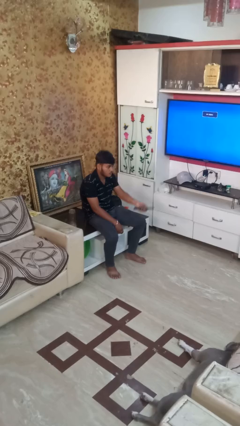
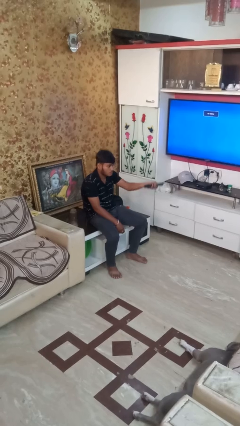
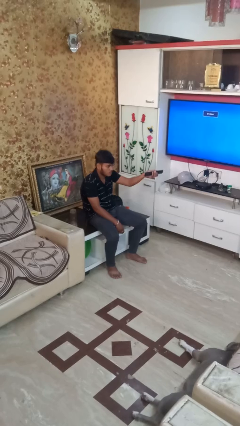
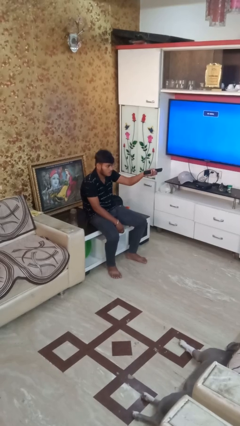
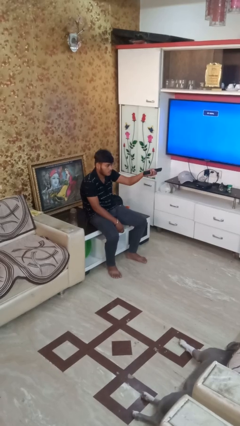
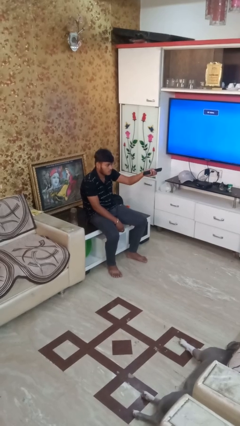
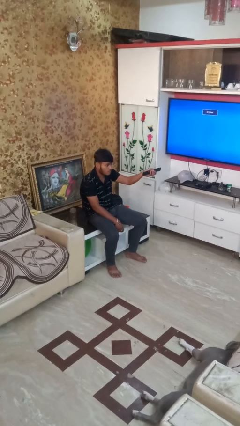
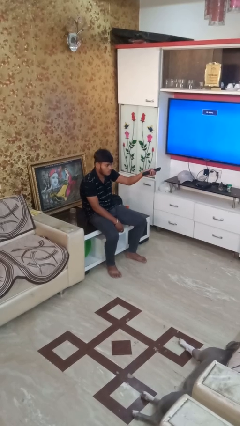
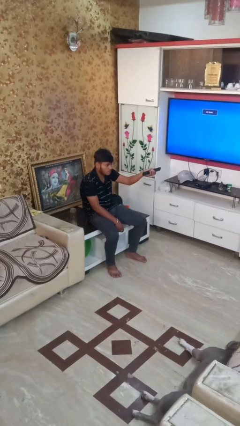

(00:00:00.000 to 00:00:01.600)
person uses television remote

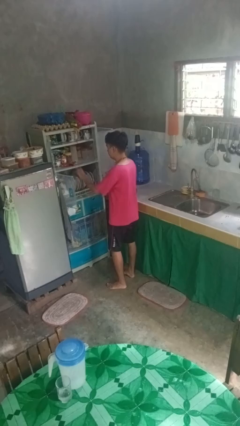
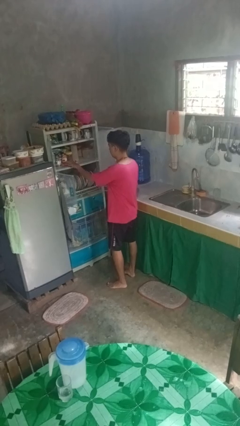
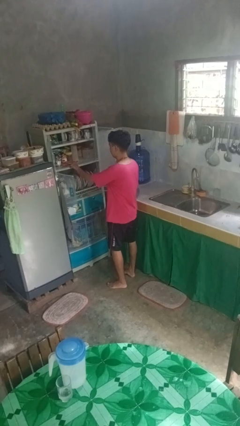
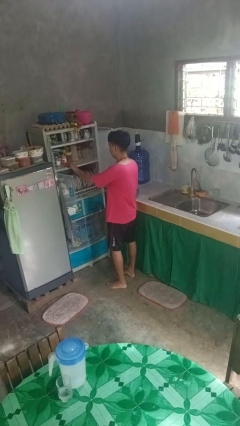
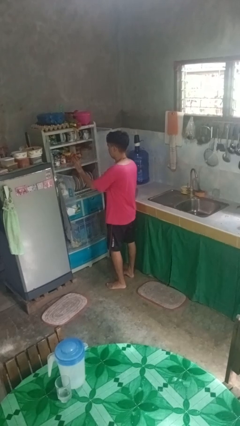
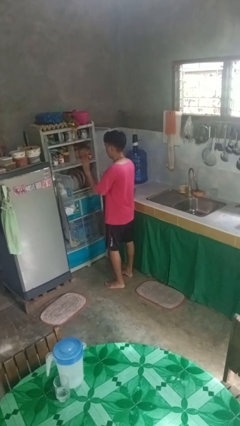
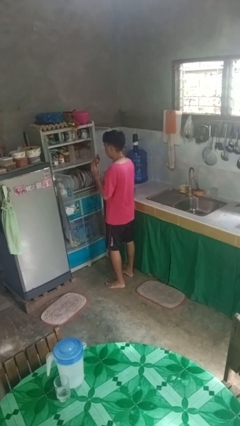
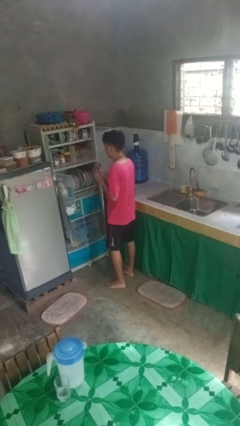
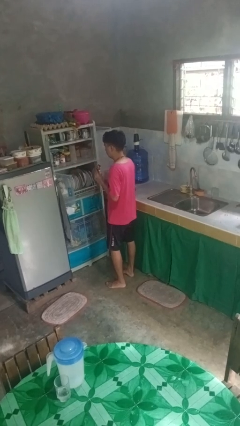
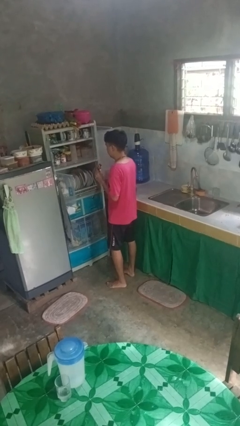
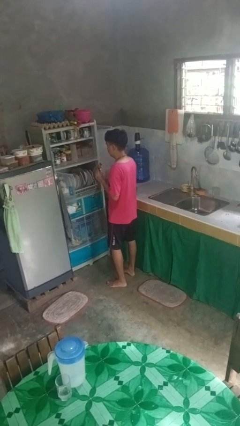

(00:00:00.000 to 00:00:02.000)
person takes object from cabinet

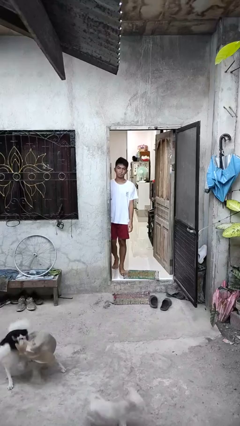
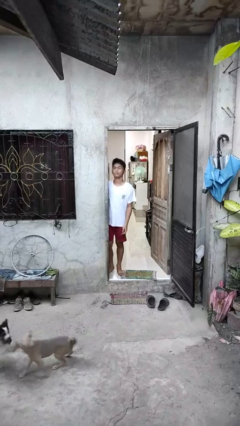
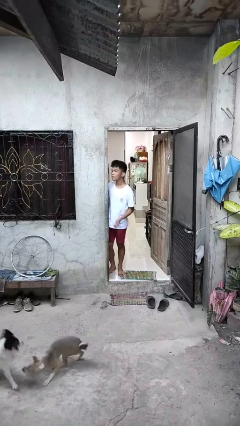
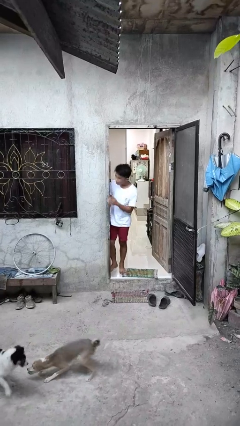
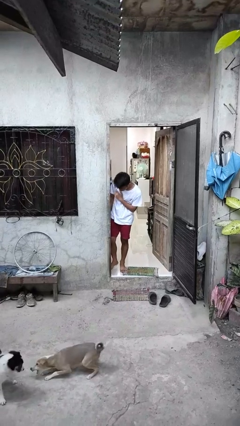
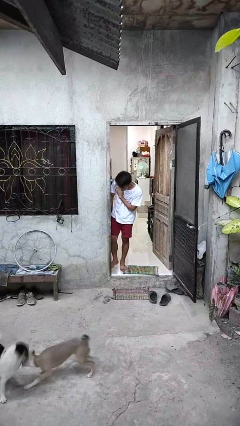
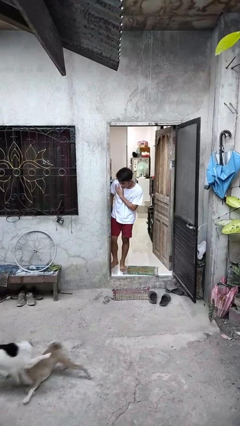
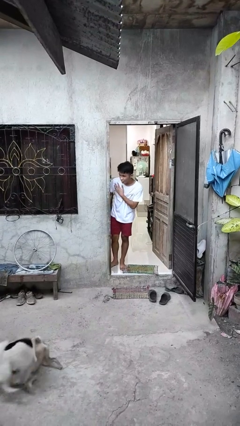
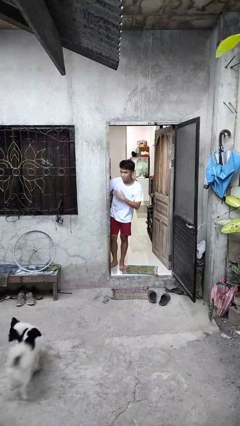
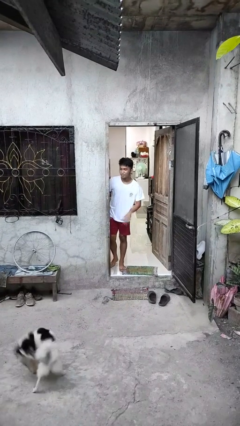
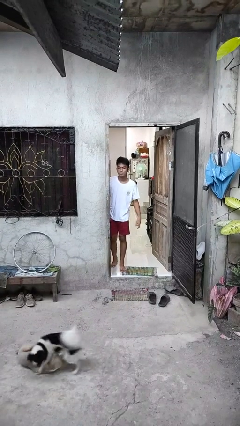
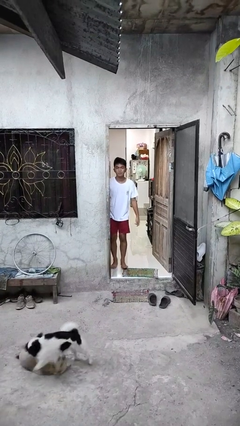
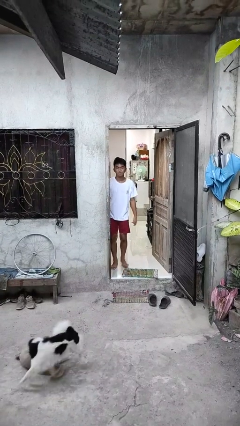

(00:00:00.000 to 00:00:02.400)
person bumps into wall

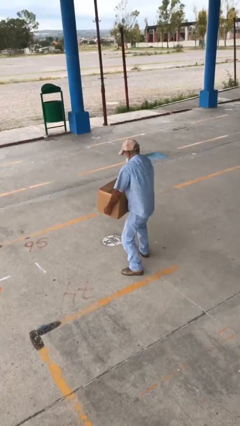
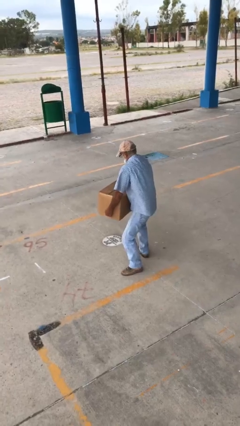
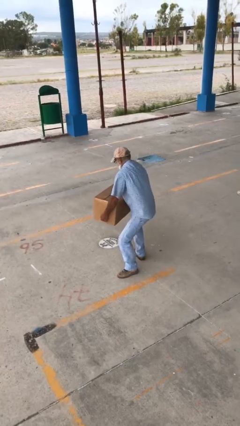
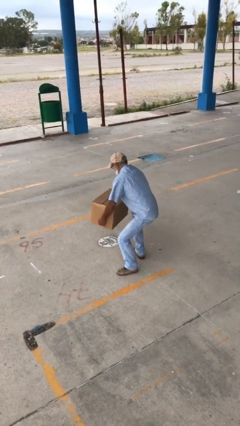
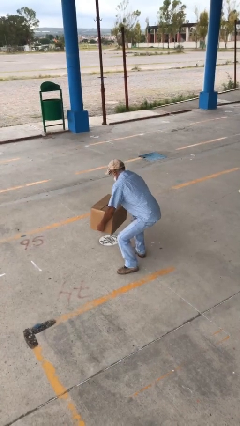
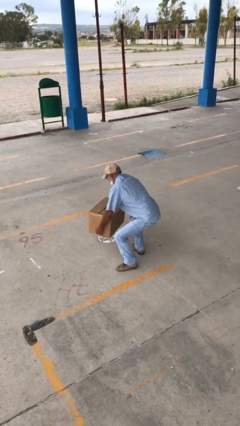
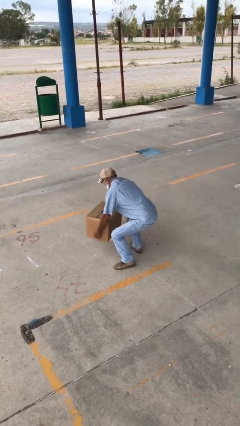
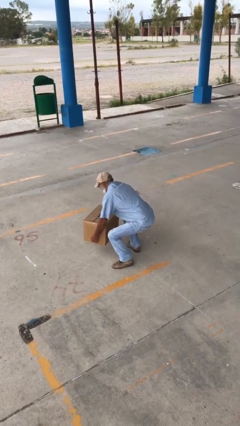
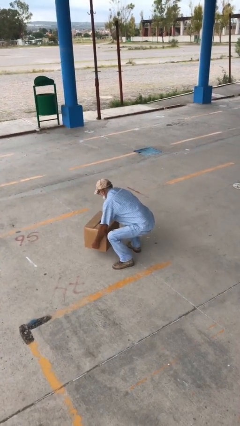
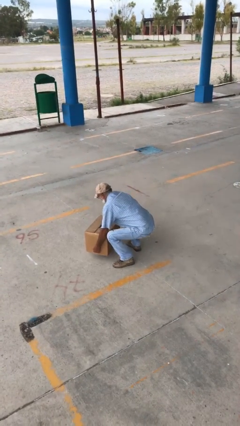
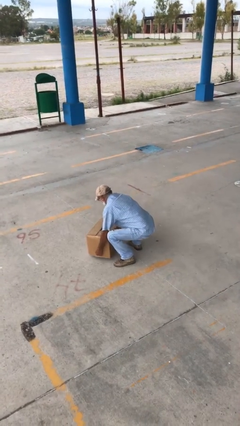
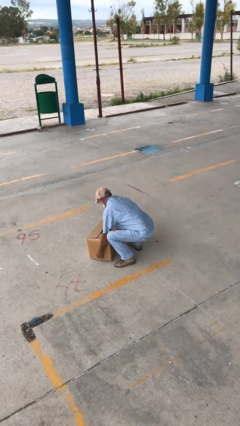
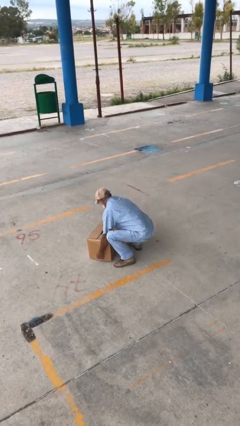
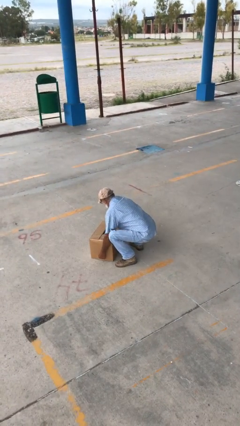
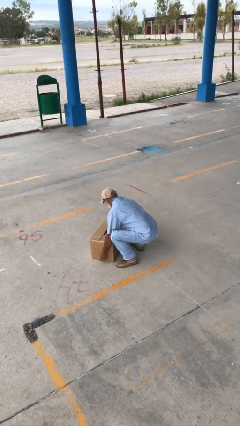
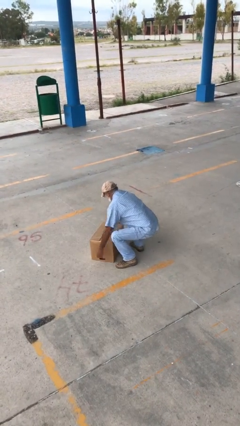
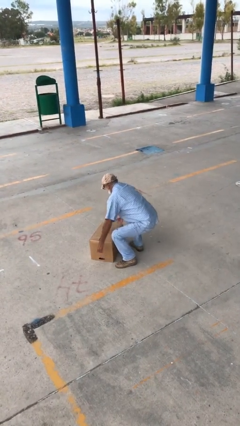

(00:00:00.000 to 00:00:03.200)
person puts down object on floor

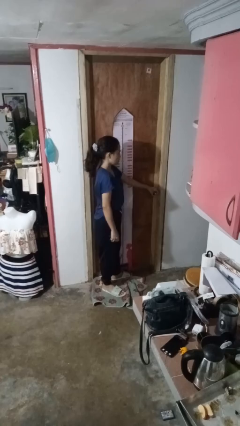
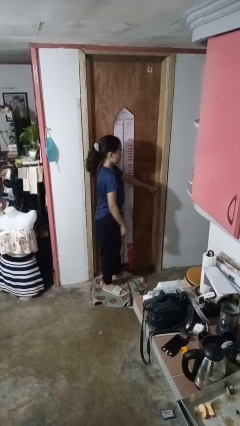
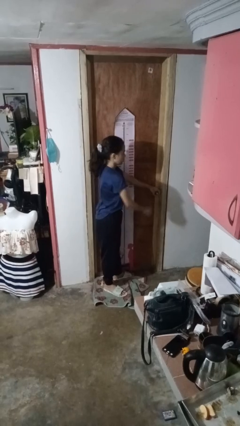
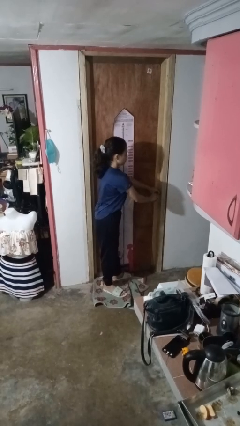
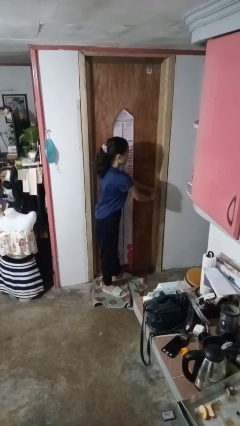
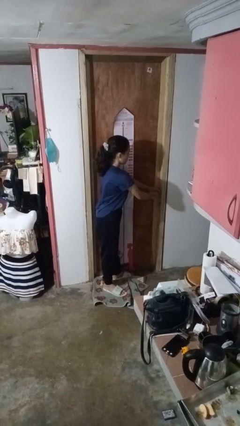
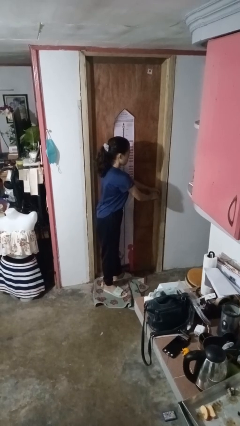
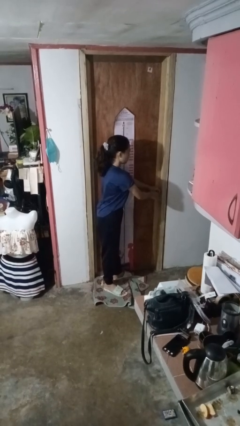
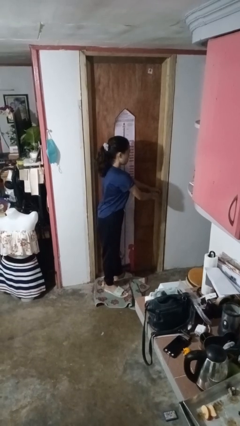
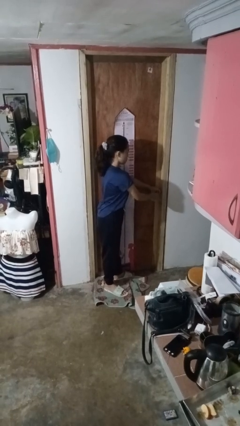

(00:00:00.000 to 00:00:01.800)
person locks door with keys

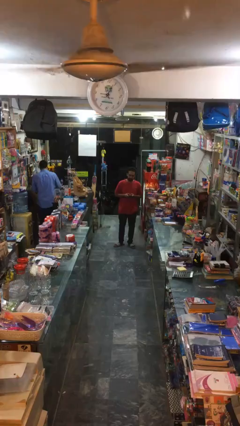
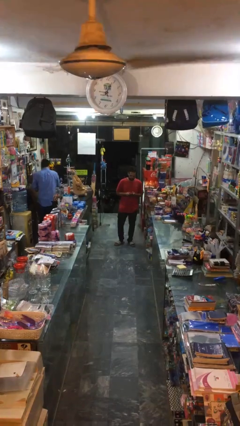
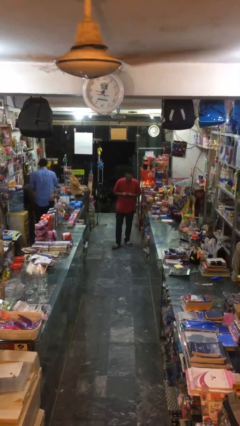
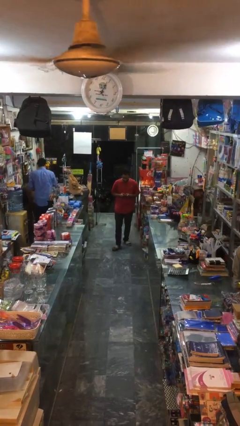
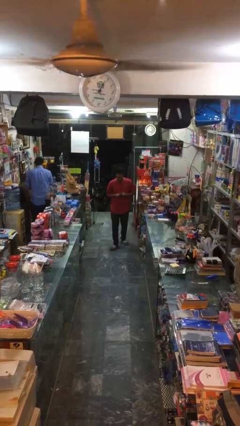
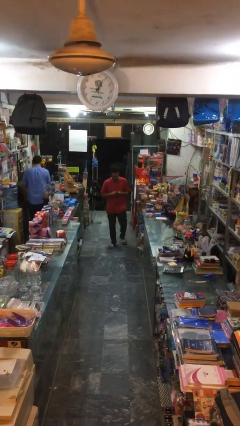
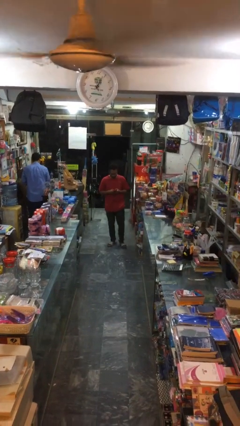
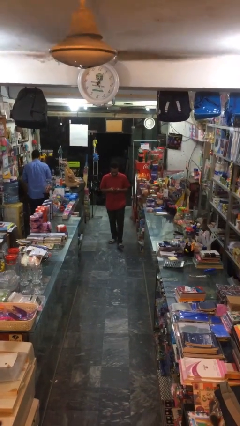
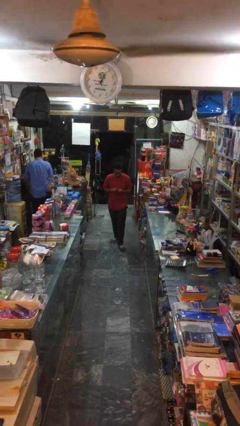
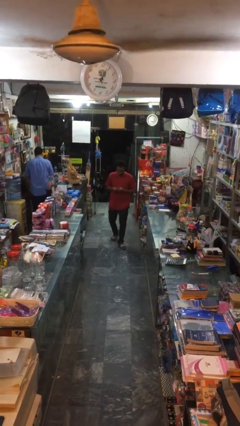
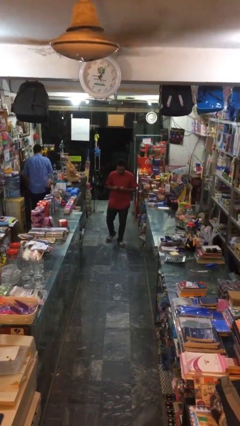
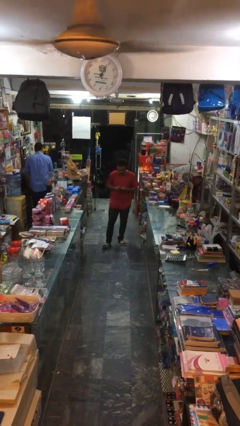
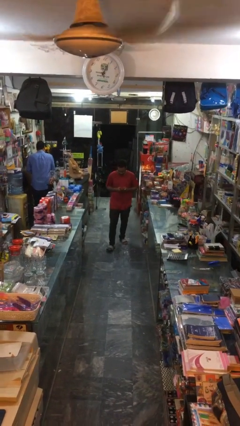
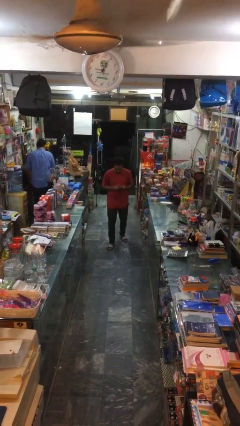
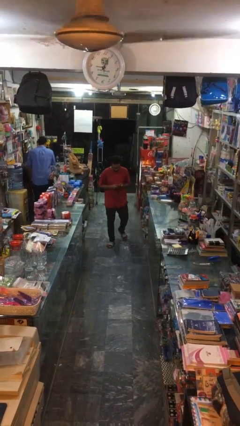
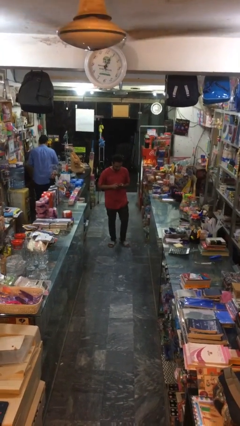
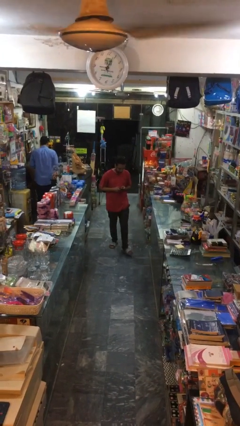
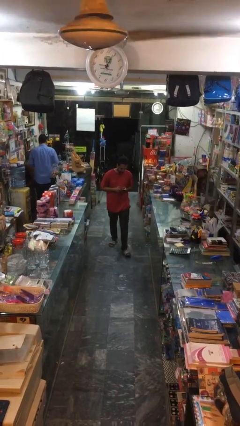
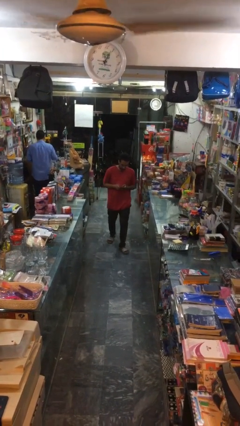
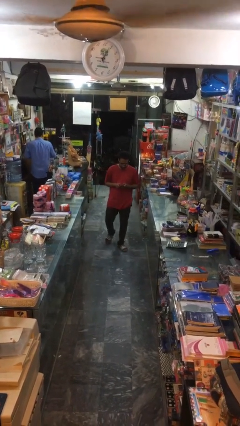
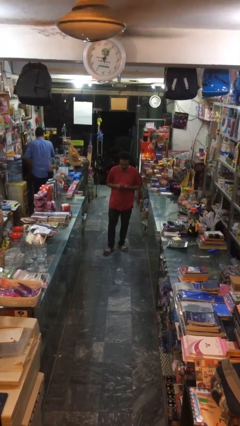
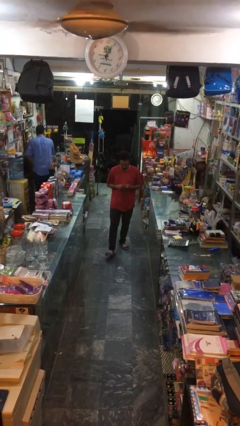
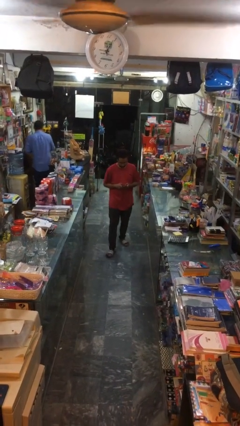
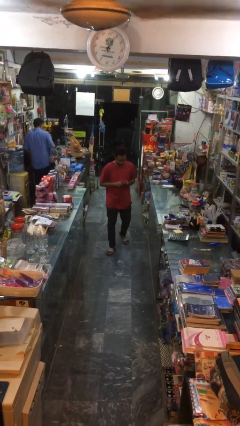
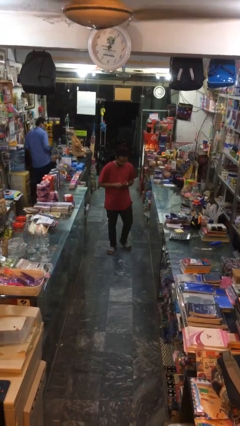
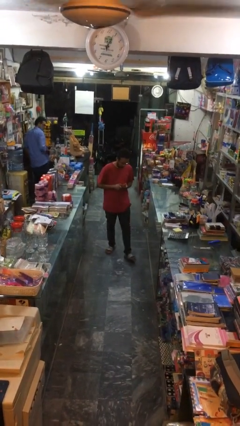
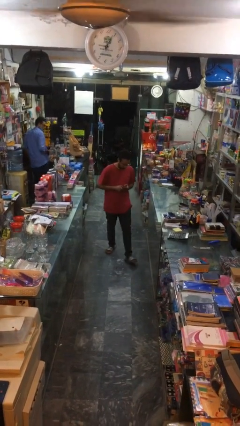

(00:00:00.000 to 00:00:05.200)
person texts on phone

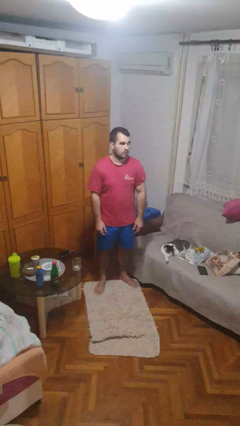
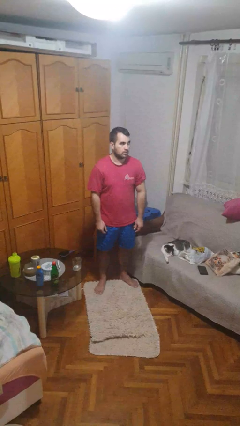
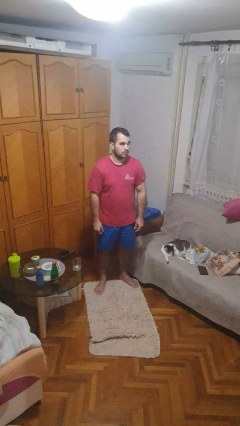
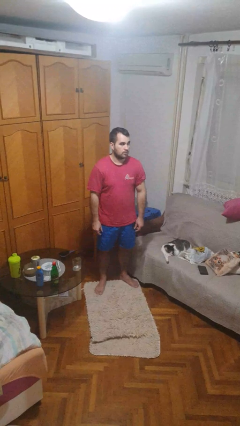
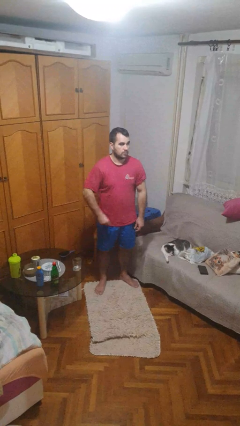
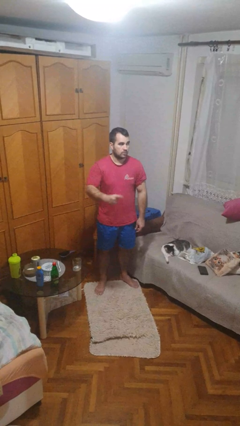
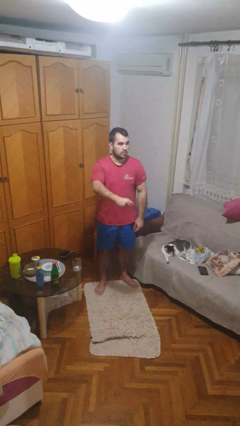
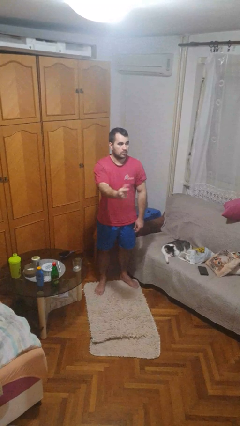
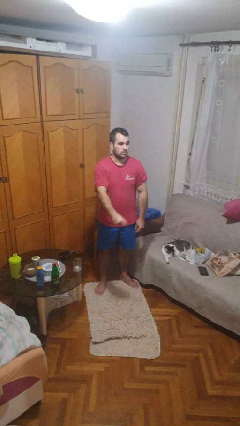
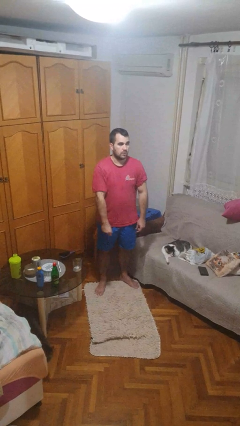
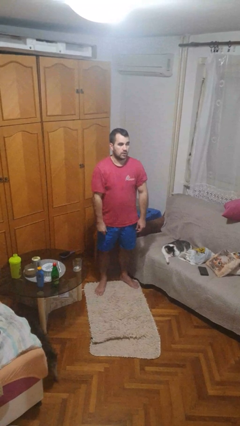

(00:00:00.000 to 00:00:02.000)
person snaps fingers
